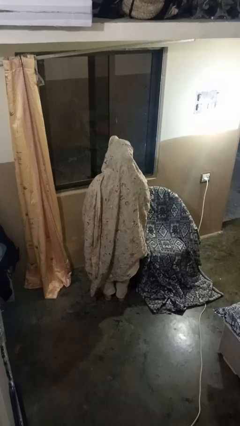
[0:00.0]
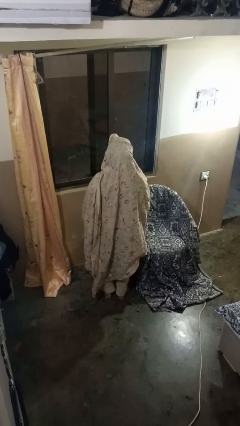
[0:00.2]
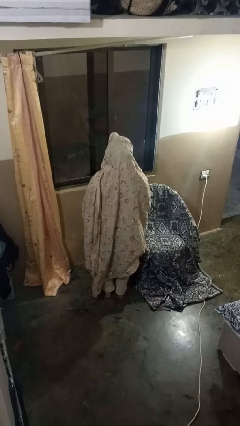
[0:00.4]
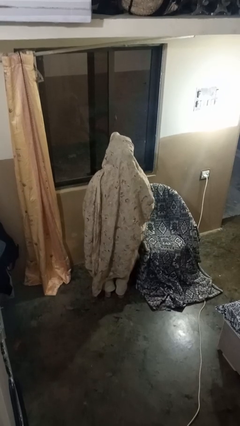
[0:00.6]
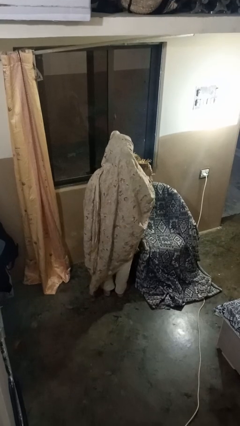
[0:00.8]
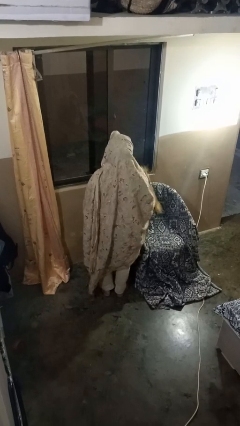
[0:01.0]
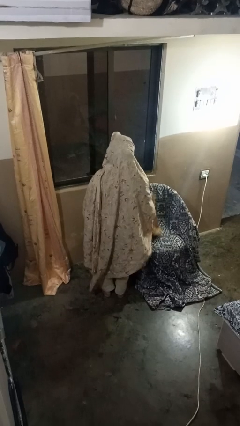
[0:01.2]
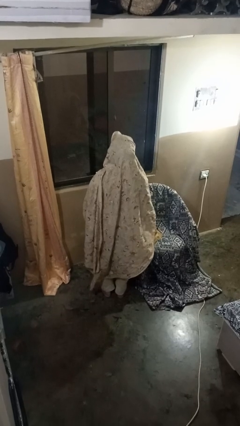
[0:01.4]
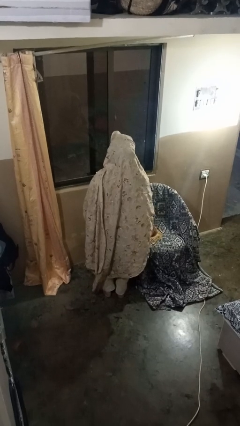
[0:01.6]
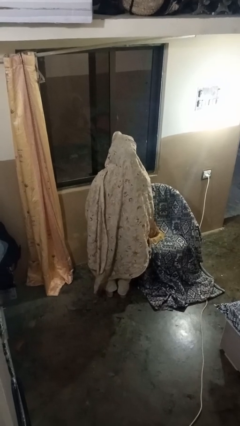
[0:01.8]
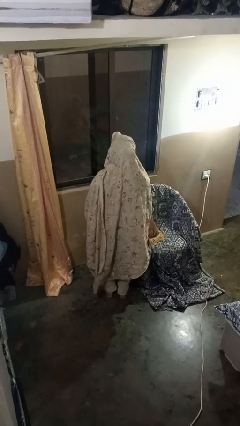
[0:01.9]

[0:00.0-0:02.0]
person puts down object on couch

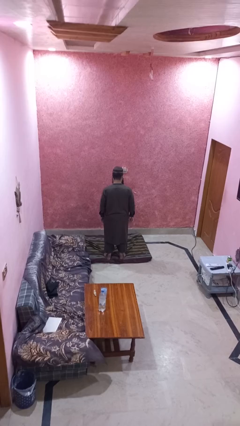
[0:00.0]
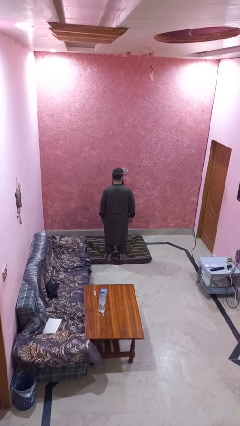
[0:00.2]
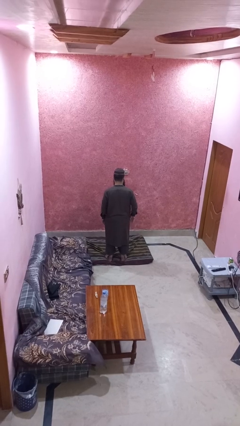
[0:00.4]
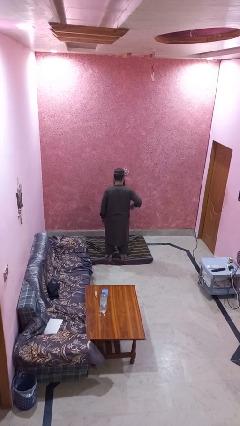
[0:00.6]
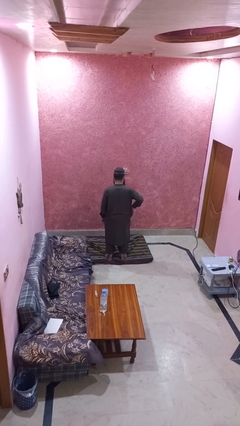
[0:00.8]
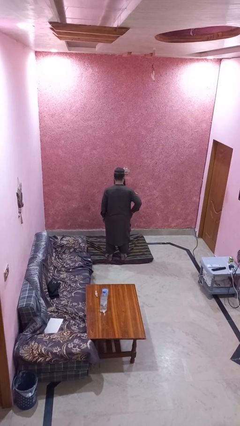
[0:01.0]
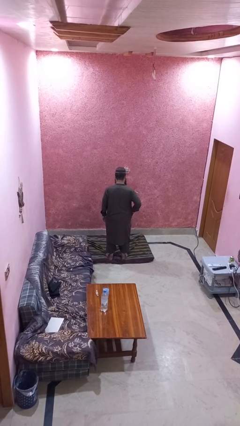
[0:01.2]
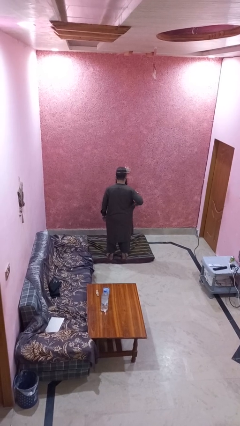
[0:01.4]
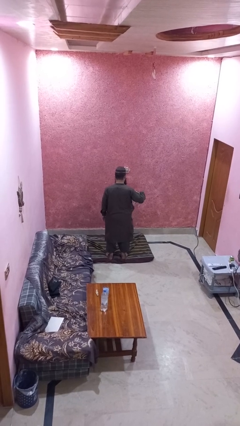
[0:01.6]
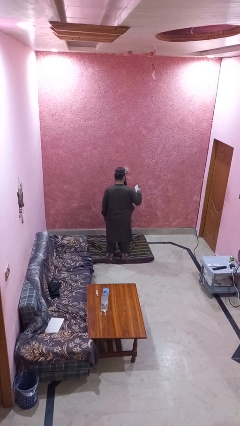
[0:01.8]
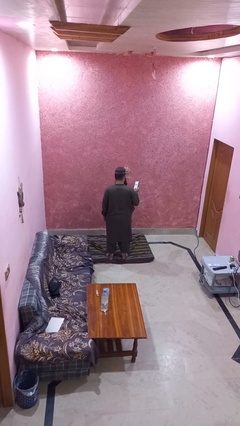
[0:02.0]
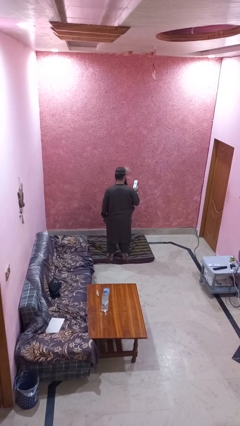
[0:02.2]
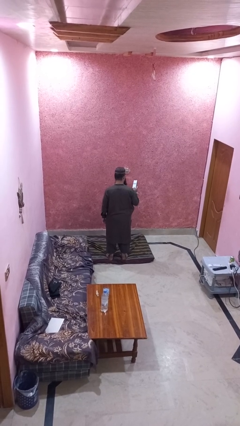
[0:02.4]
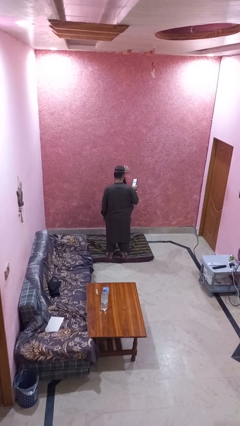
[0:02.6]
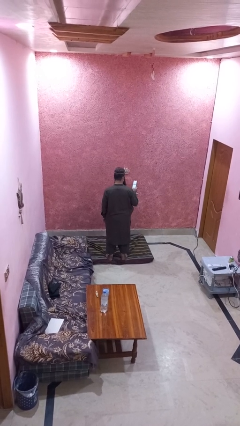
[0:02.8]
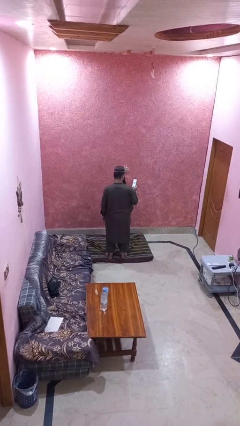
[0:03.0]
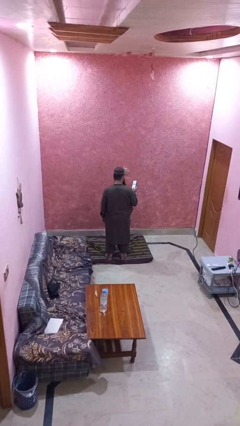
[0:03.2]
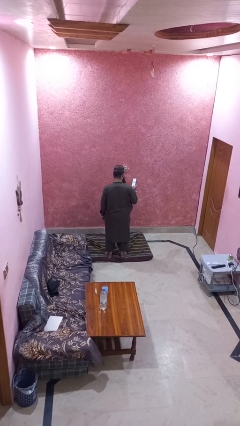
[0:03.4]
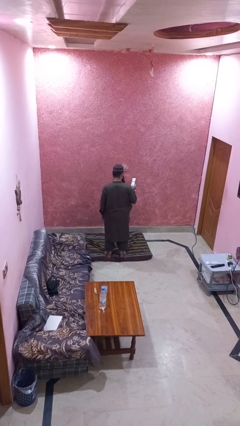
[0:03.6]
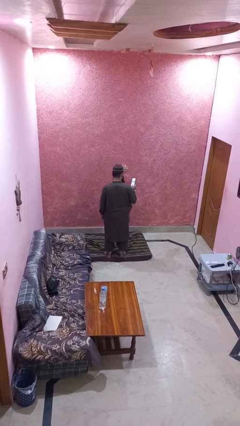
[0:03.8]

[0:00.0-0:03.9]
person takes phone from pocket

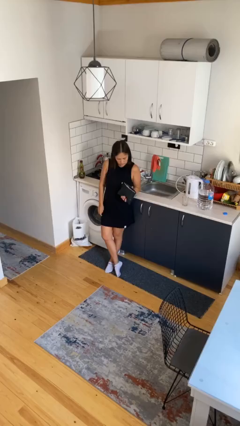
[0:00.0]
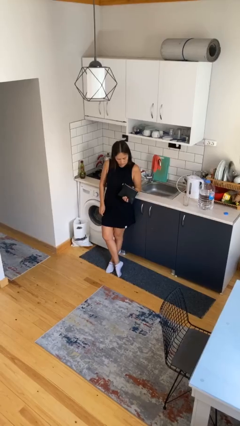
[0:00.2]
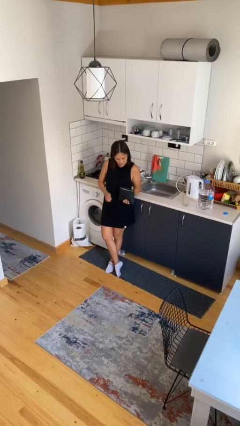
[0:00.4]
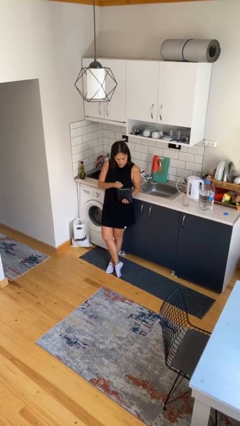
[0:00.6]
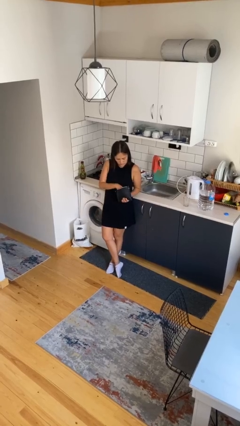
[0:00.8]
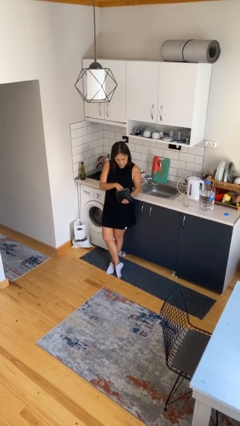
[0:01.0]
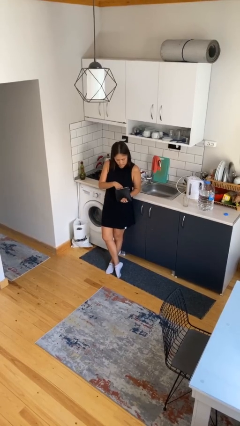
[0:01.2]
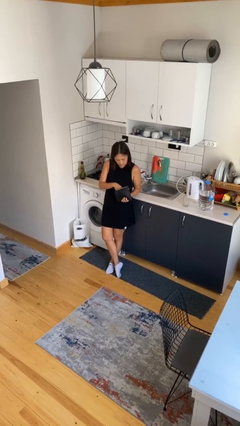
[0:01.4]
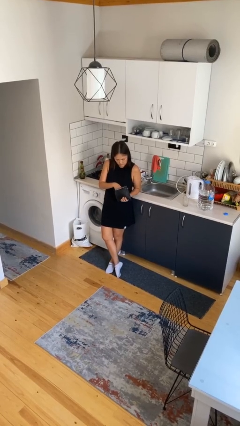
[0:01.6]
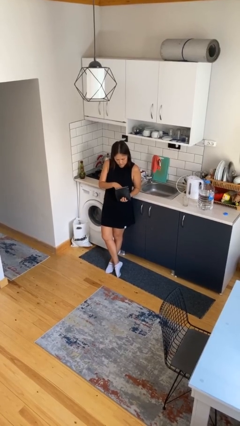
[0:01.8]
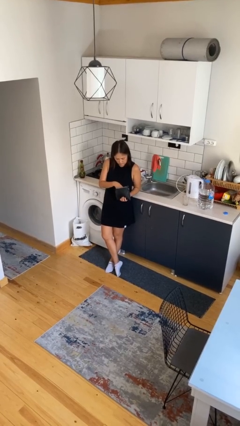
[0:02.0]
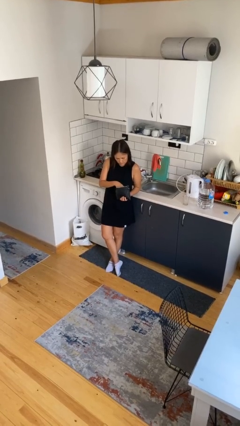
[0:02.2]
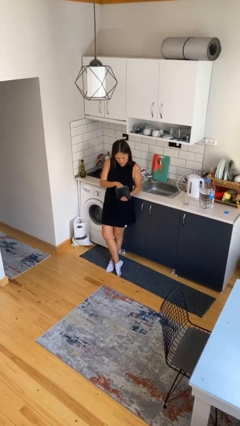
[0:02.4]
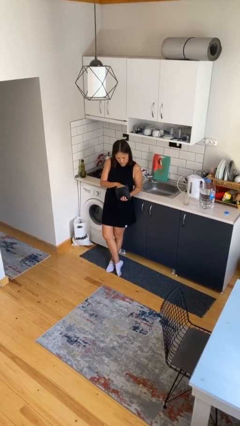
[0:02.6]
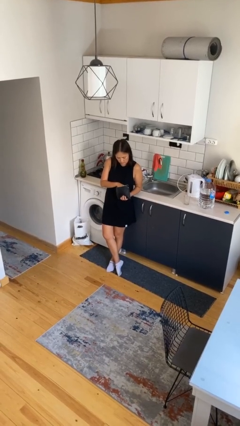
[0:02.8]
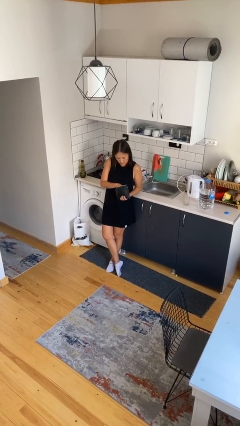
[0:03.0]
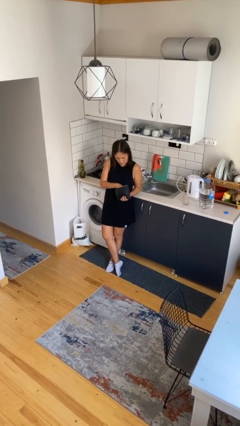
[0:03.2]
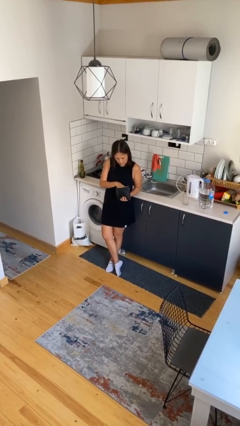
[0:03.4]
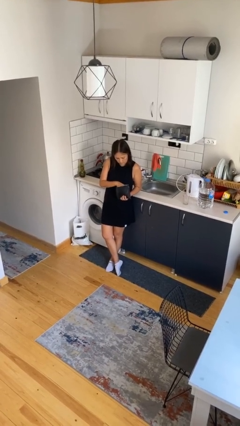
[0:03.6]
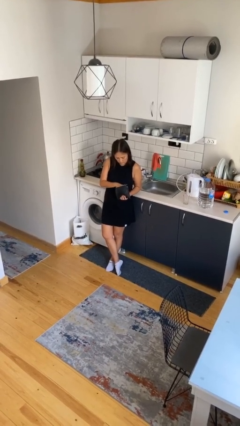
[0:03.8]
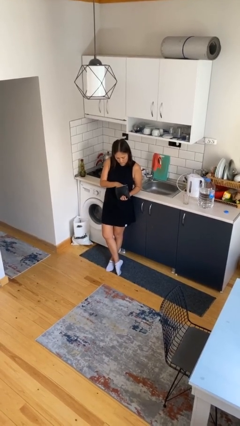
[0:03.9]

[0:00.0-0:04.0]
person searches in purse

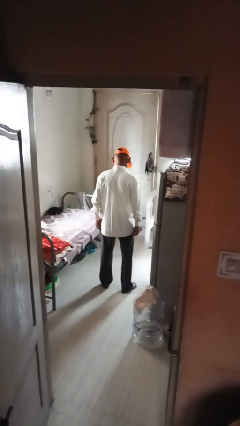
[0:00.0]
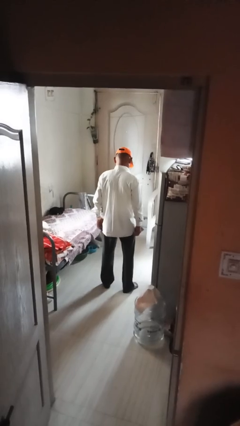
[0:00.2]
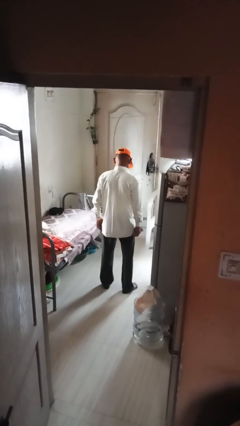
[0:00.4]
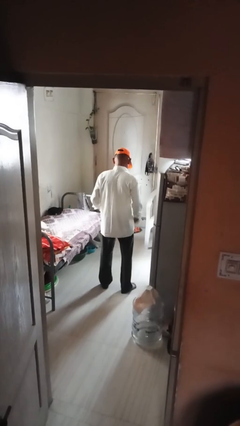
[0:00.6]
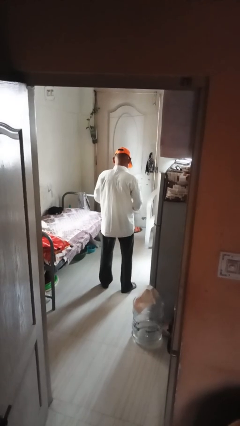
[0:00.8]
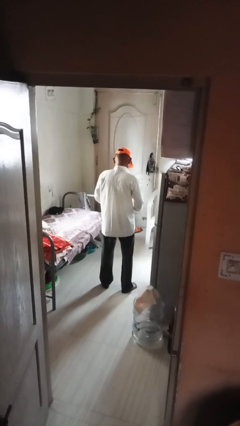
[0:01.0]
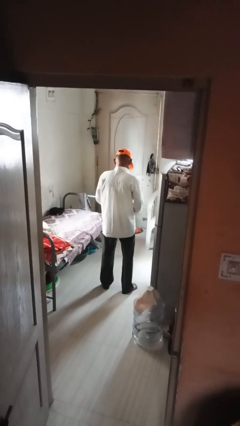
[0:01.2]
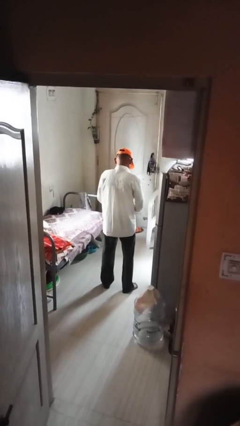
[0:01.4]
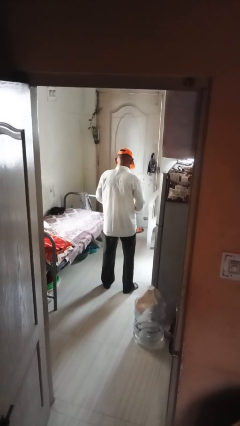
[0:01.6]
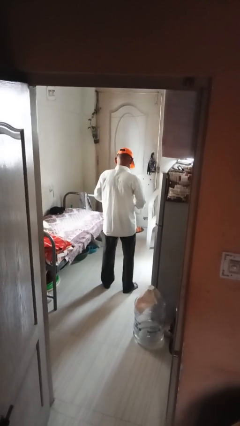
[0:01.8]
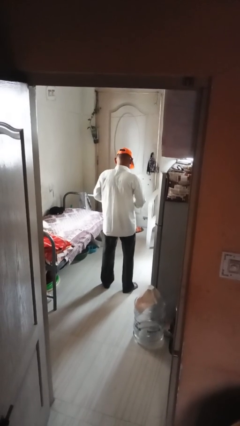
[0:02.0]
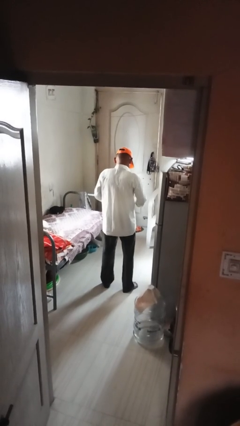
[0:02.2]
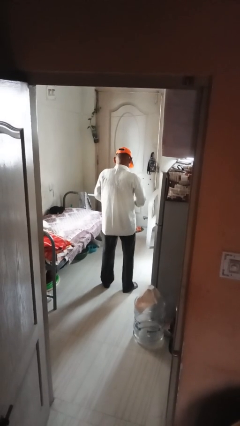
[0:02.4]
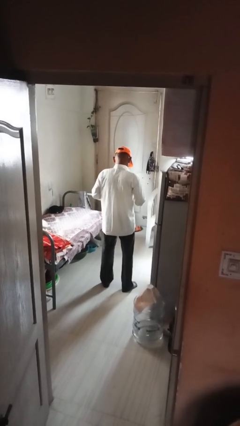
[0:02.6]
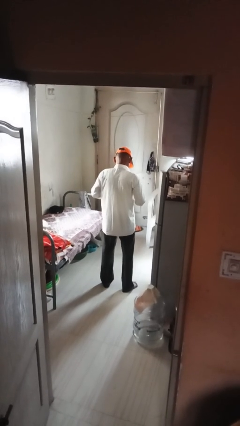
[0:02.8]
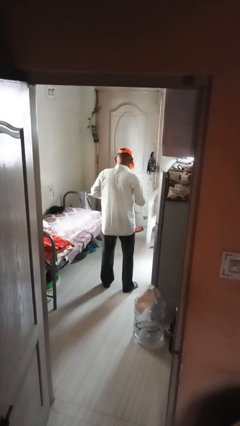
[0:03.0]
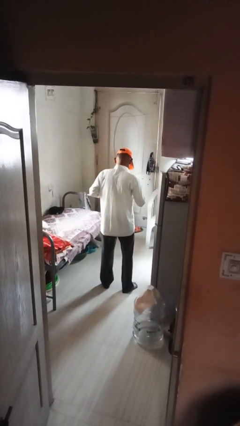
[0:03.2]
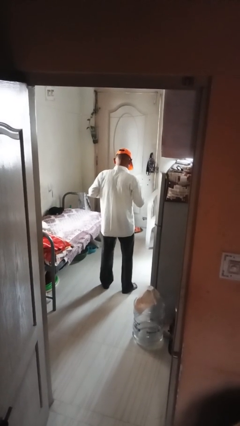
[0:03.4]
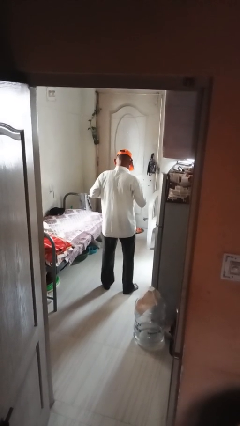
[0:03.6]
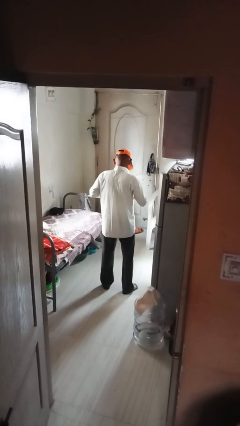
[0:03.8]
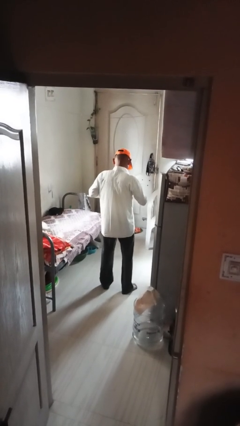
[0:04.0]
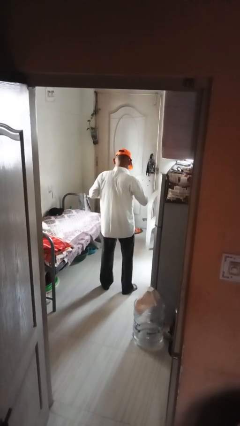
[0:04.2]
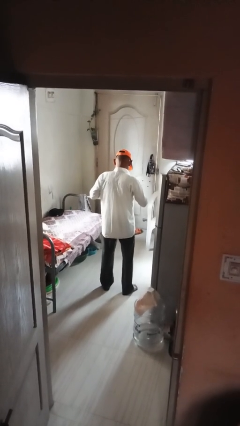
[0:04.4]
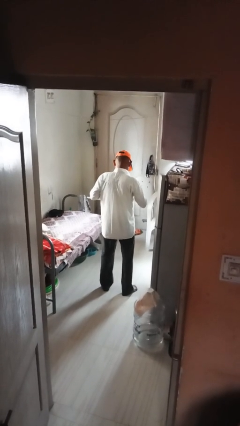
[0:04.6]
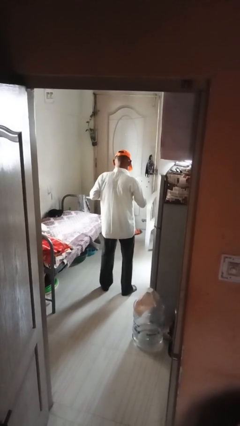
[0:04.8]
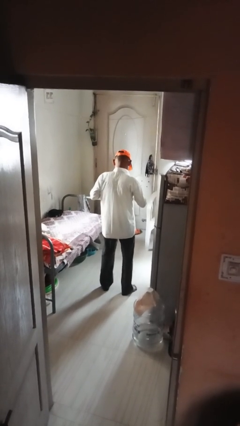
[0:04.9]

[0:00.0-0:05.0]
person buttons shirt

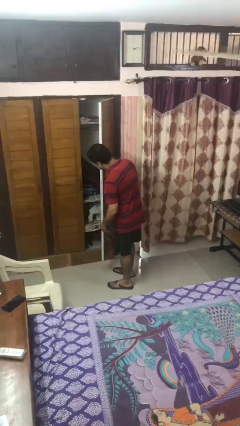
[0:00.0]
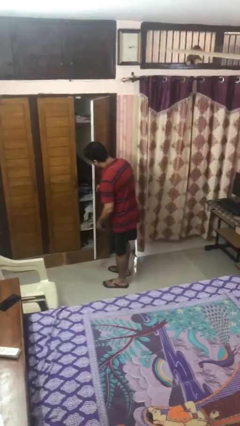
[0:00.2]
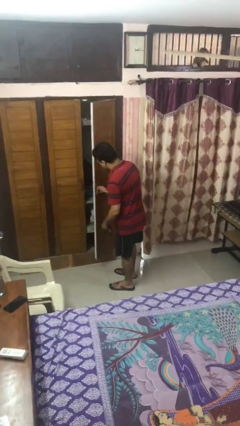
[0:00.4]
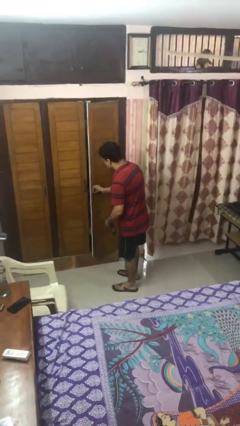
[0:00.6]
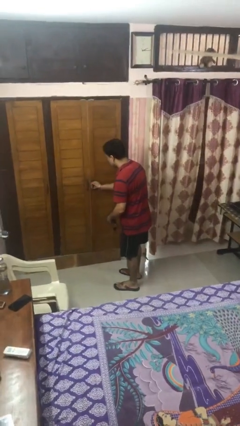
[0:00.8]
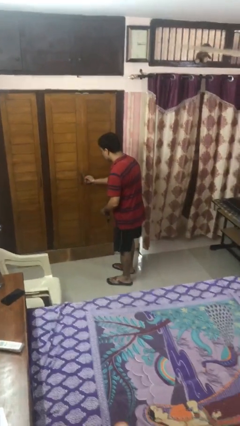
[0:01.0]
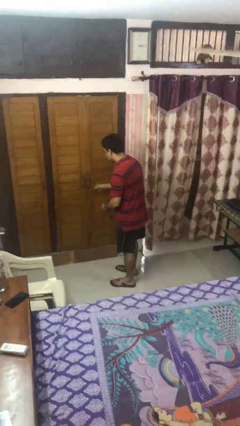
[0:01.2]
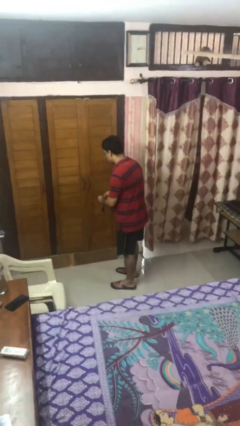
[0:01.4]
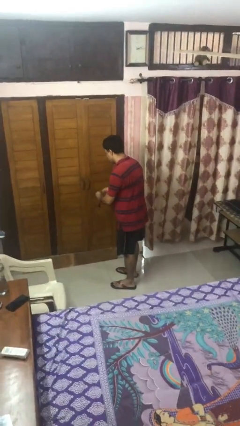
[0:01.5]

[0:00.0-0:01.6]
person closes facility door

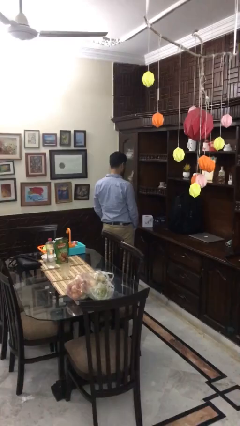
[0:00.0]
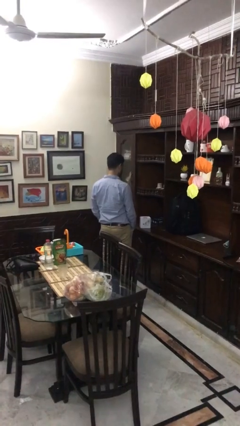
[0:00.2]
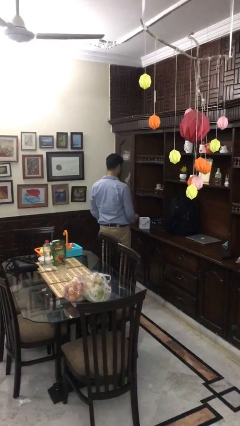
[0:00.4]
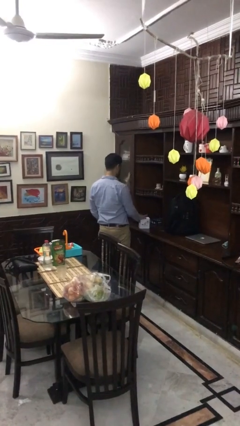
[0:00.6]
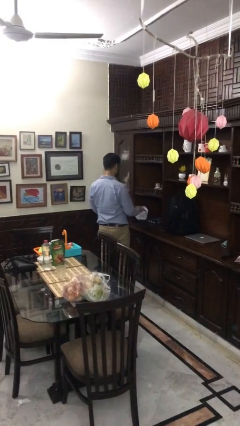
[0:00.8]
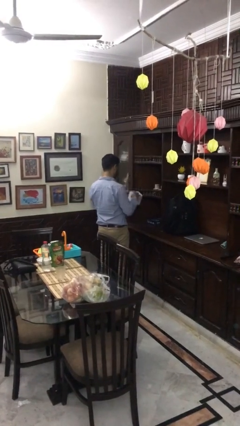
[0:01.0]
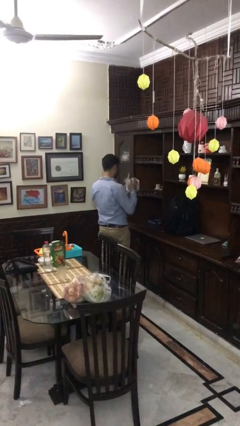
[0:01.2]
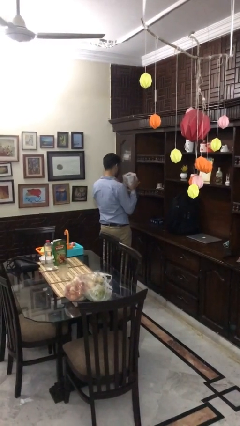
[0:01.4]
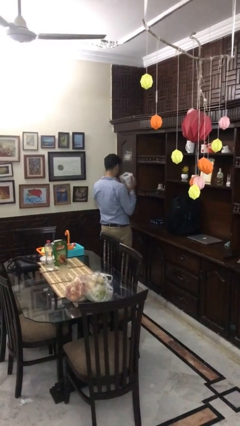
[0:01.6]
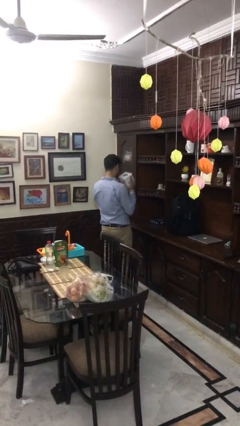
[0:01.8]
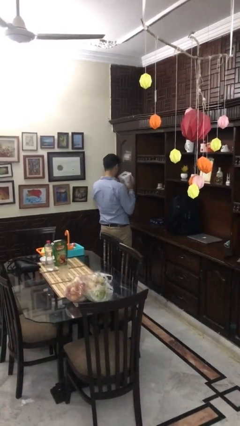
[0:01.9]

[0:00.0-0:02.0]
person picks up object from countertop
